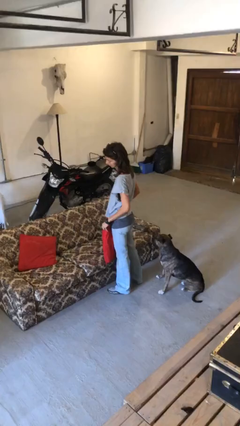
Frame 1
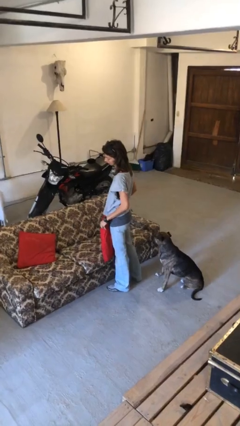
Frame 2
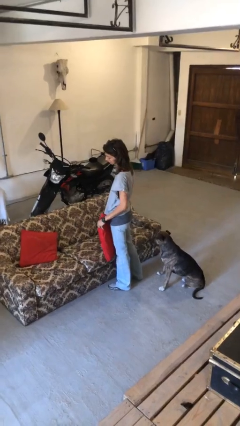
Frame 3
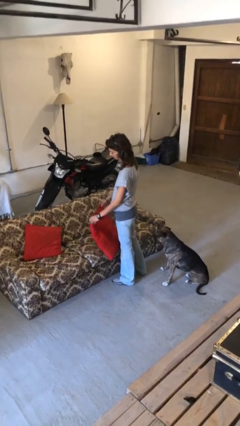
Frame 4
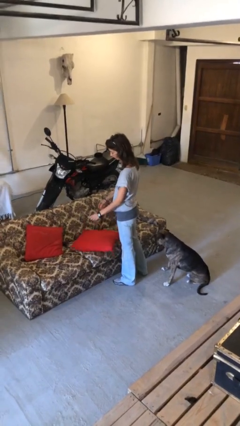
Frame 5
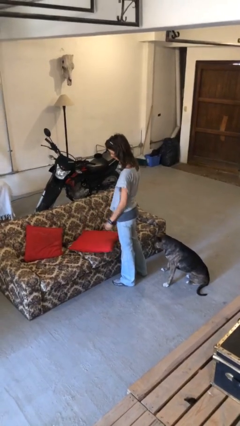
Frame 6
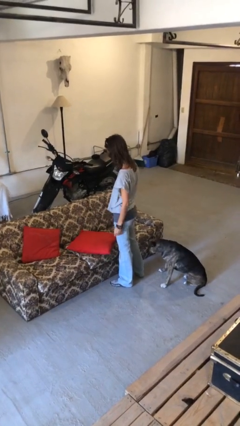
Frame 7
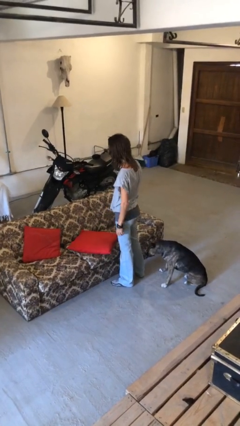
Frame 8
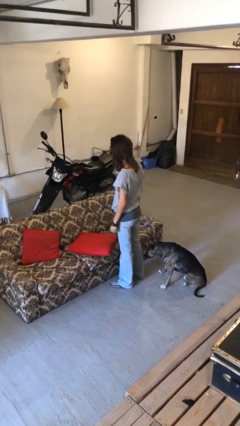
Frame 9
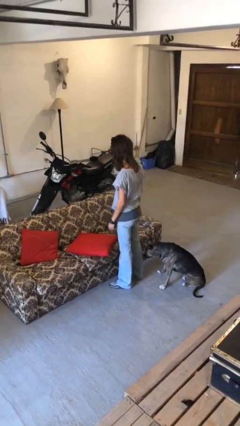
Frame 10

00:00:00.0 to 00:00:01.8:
person puts down object on couch

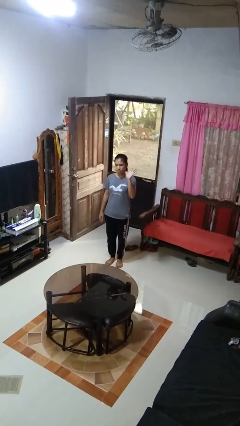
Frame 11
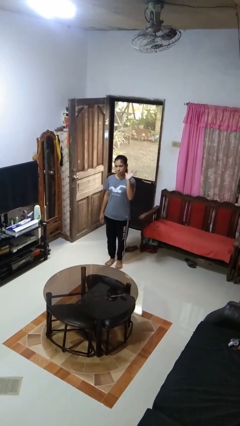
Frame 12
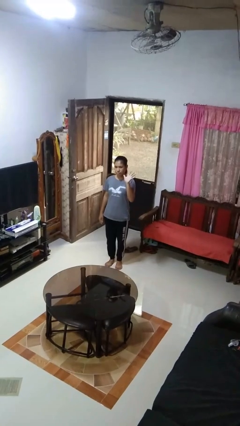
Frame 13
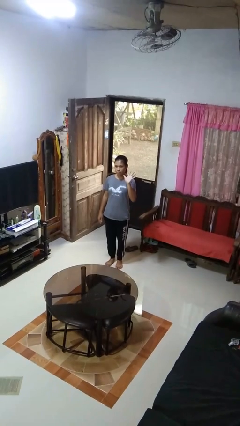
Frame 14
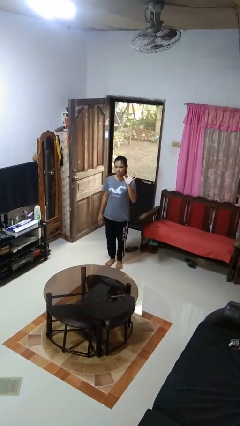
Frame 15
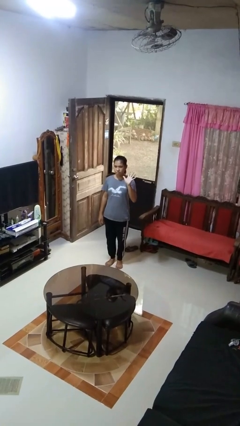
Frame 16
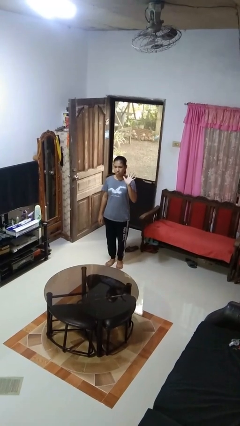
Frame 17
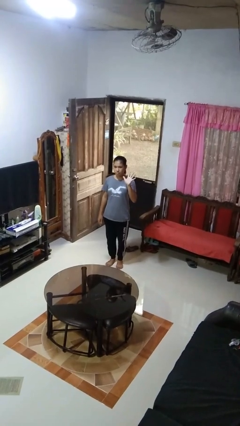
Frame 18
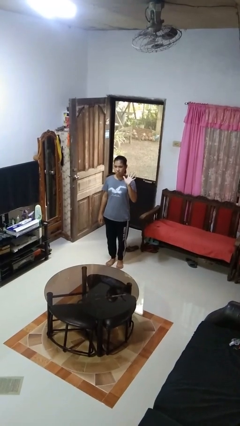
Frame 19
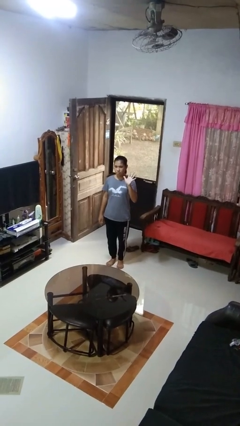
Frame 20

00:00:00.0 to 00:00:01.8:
person gestures number five

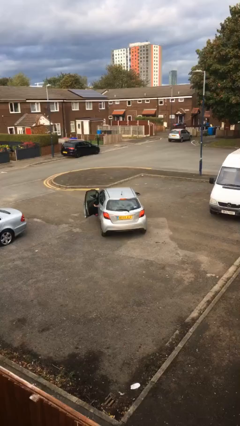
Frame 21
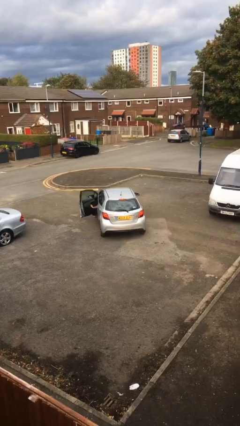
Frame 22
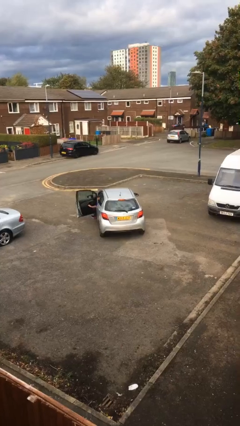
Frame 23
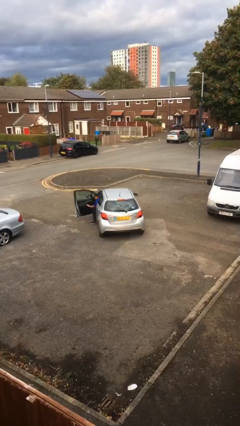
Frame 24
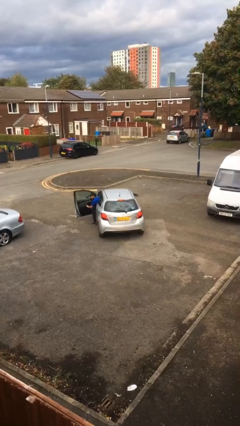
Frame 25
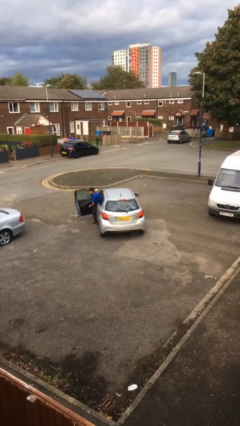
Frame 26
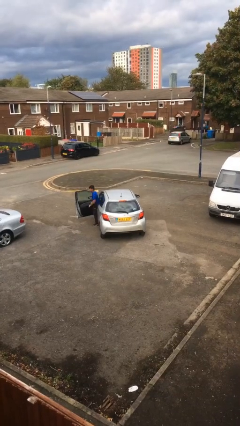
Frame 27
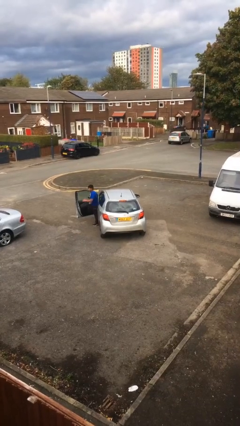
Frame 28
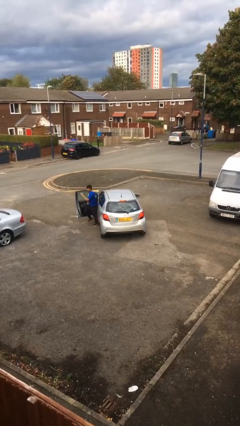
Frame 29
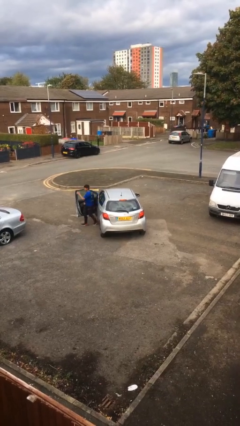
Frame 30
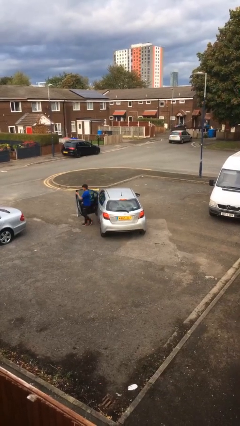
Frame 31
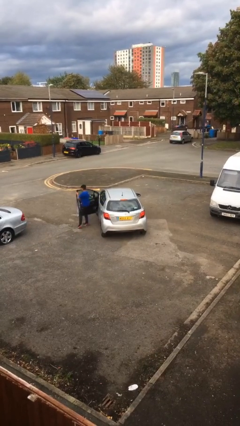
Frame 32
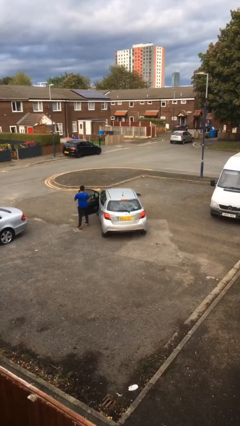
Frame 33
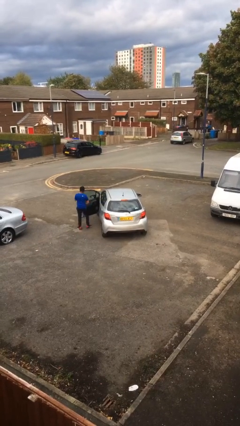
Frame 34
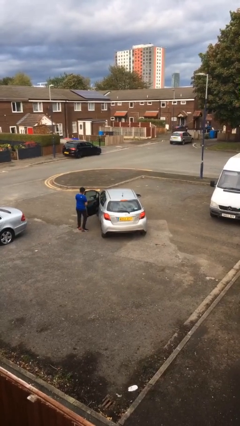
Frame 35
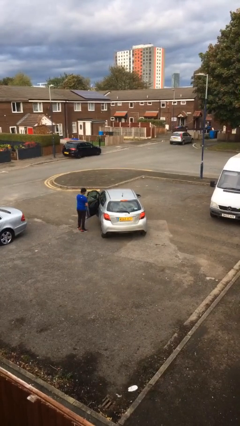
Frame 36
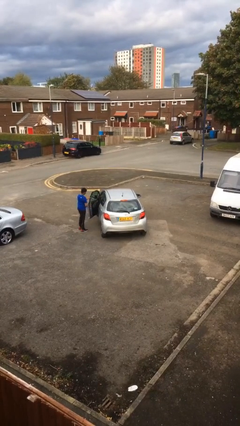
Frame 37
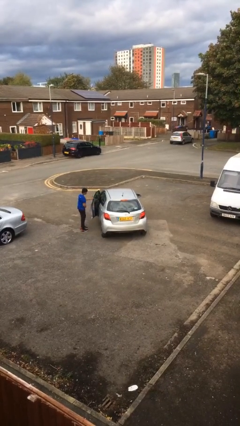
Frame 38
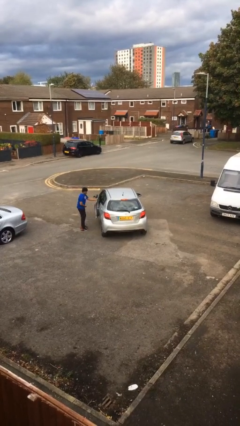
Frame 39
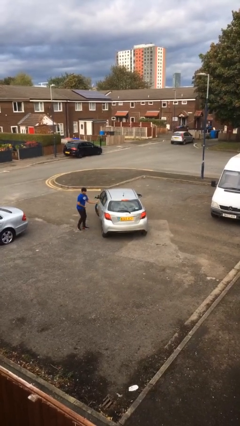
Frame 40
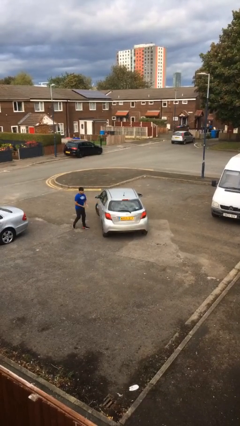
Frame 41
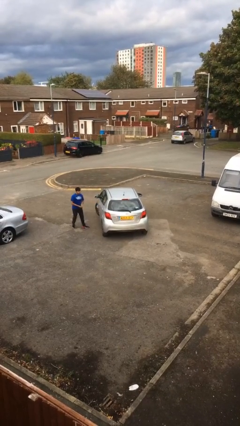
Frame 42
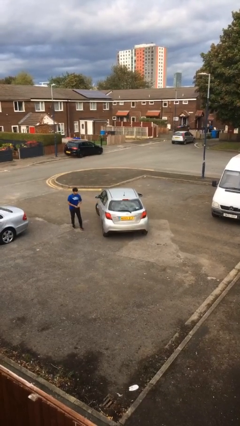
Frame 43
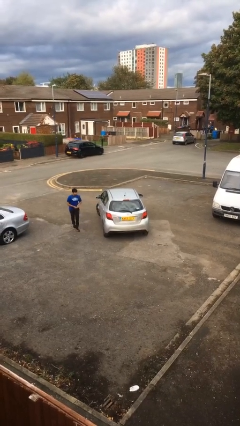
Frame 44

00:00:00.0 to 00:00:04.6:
car drops off person

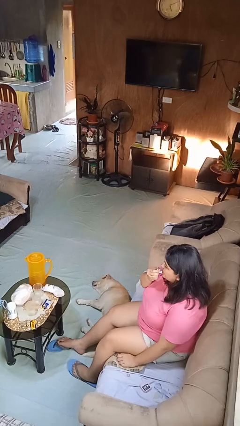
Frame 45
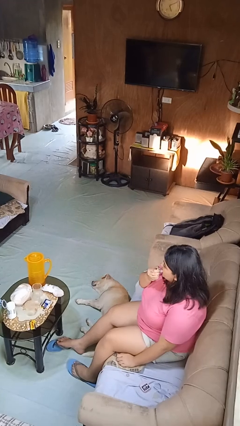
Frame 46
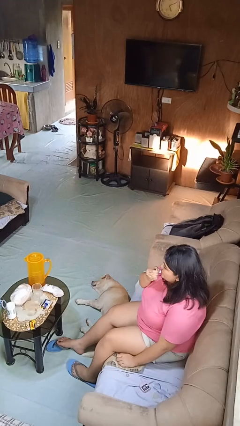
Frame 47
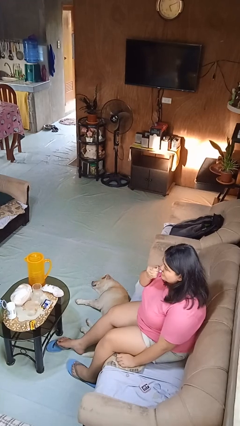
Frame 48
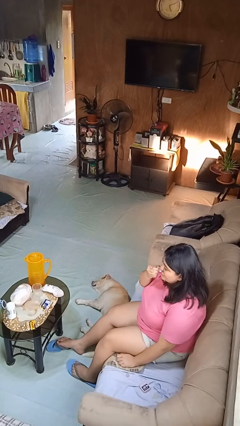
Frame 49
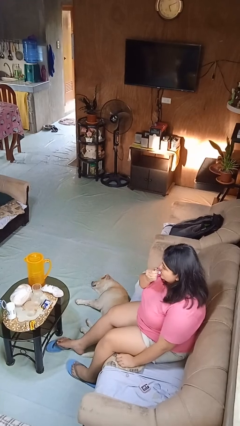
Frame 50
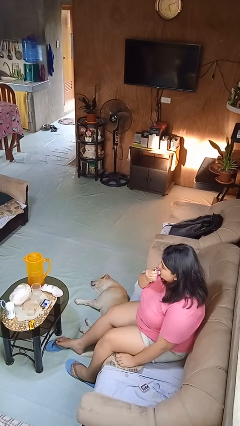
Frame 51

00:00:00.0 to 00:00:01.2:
person applies lip makeup

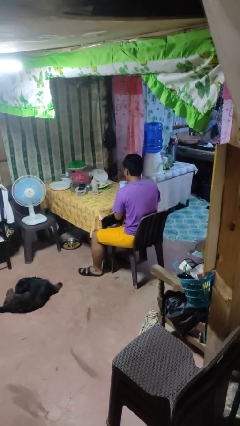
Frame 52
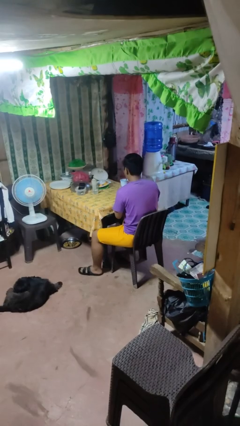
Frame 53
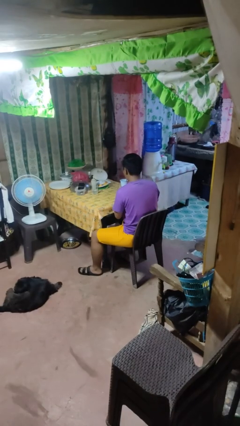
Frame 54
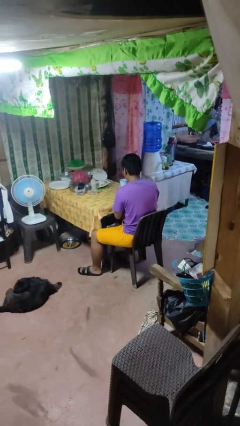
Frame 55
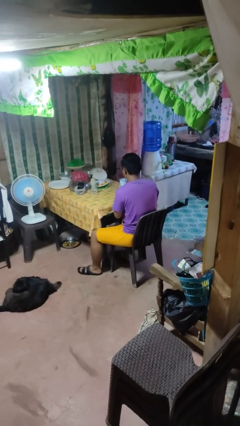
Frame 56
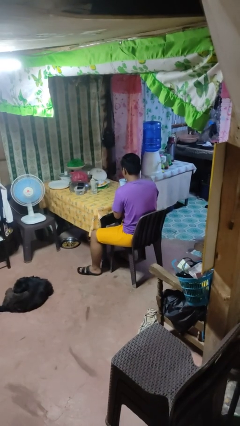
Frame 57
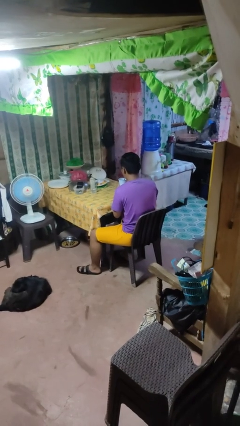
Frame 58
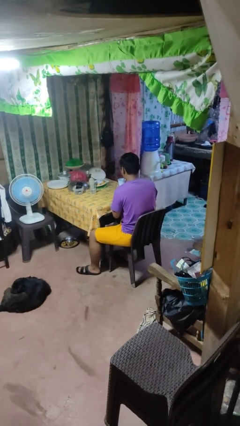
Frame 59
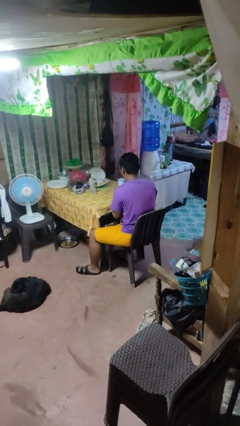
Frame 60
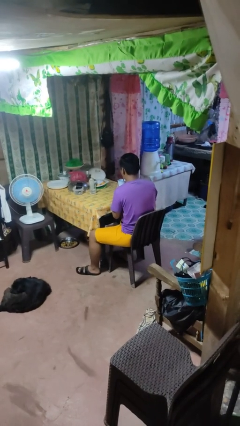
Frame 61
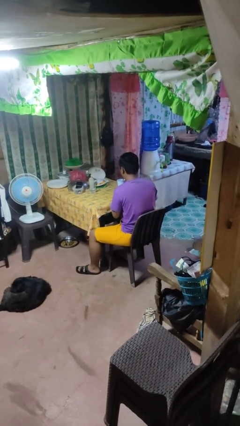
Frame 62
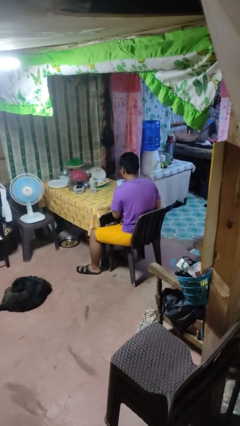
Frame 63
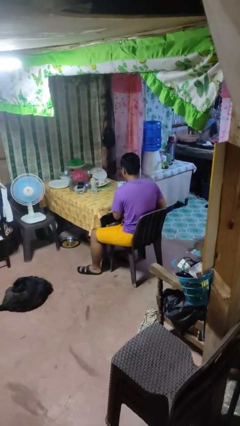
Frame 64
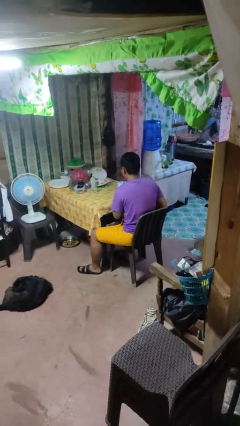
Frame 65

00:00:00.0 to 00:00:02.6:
person drinks from straw

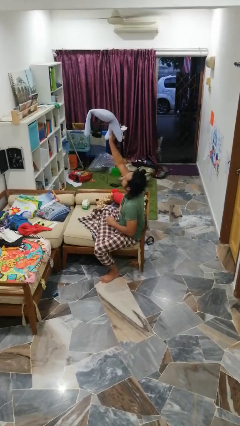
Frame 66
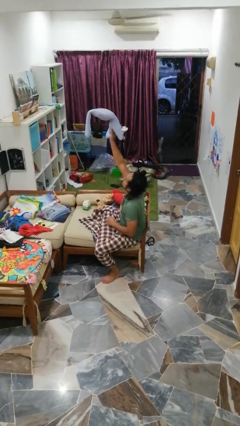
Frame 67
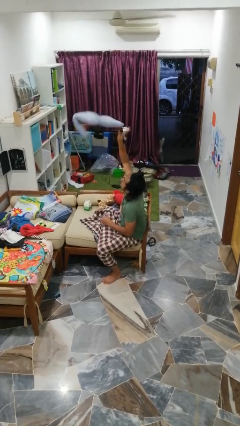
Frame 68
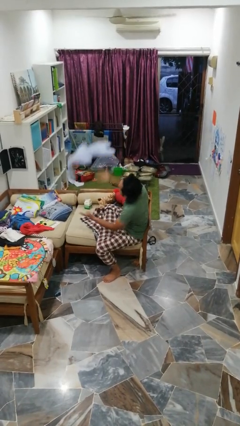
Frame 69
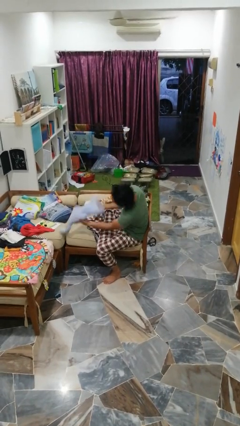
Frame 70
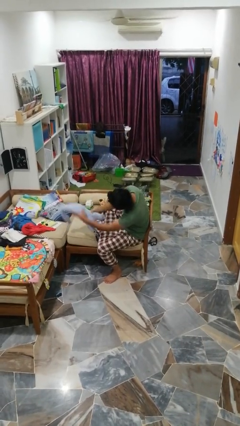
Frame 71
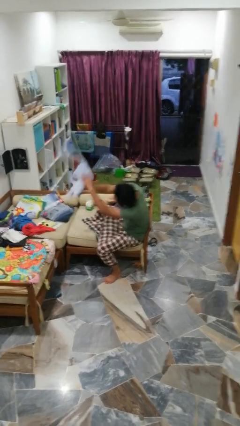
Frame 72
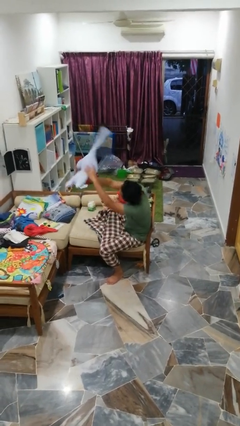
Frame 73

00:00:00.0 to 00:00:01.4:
person drops object

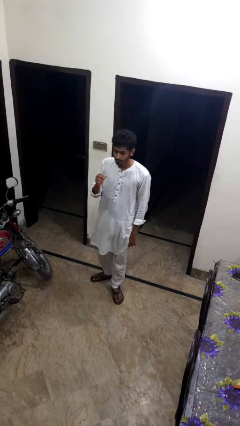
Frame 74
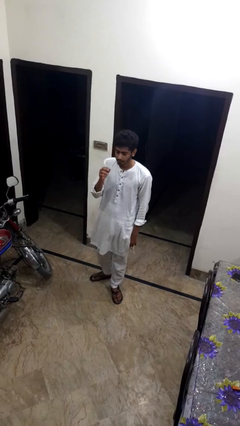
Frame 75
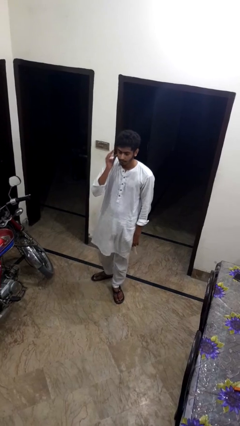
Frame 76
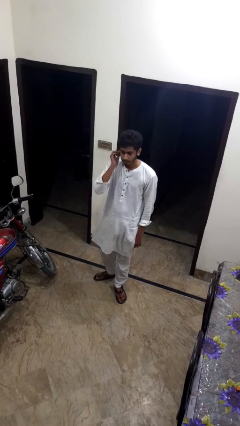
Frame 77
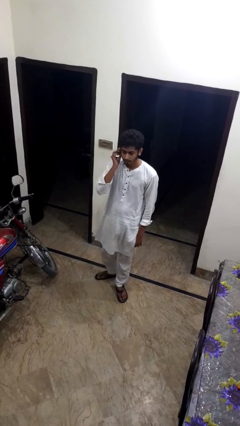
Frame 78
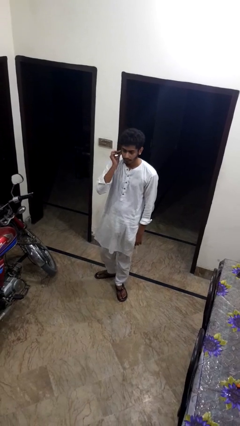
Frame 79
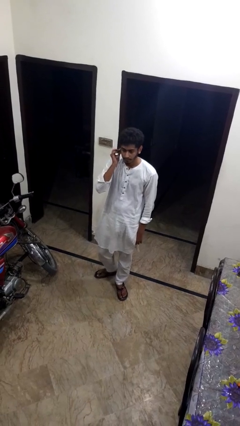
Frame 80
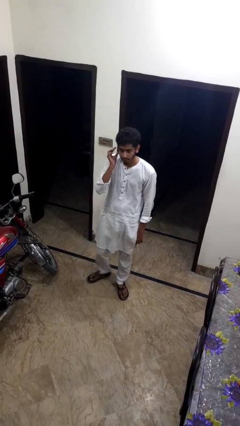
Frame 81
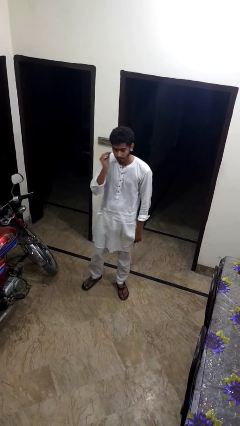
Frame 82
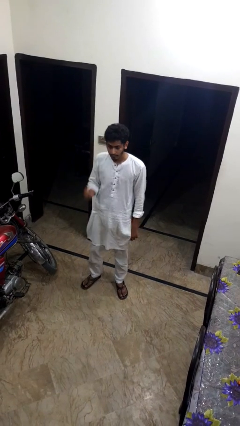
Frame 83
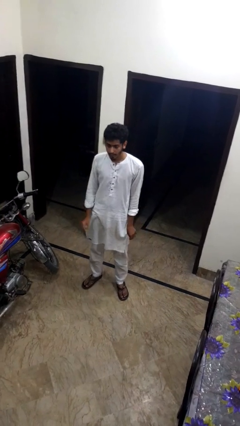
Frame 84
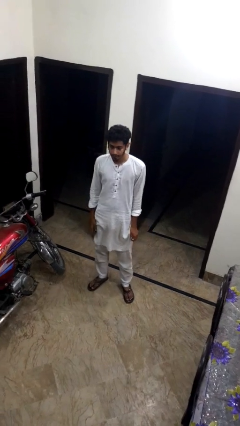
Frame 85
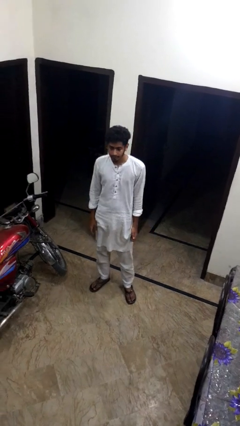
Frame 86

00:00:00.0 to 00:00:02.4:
person touches earlobe

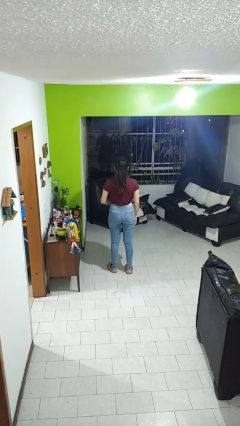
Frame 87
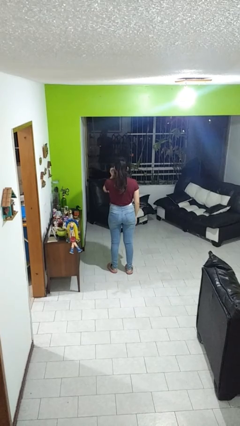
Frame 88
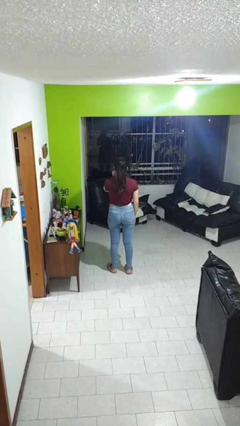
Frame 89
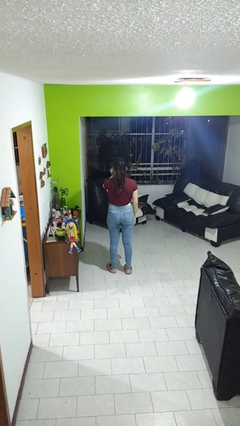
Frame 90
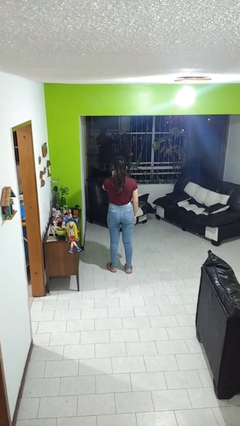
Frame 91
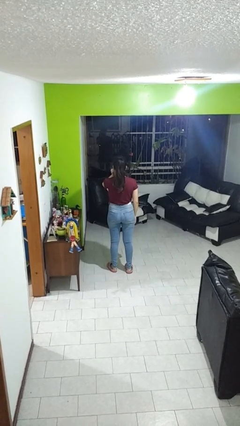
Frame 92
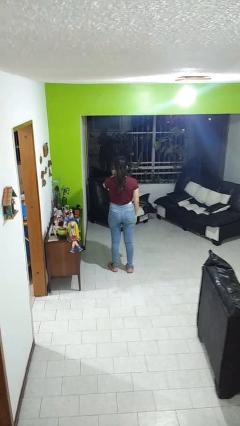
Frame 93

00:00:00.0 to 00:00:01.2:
person scratches face
